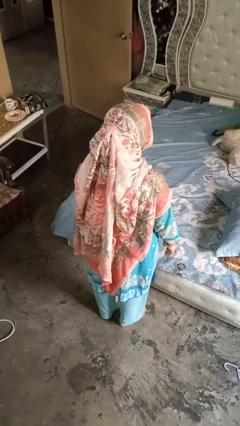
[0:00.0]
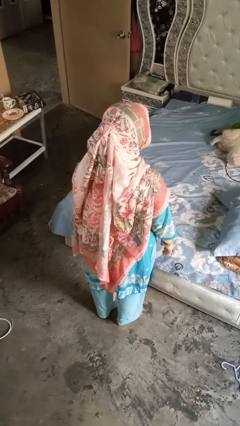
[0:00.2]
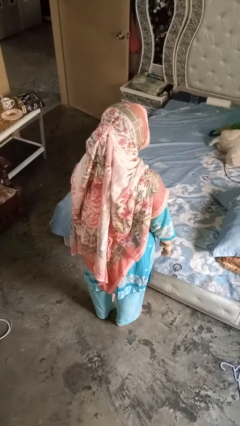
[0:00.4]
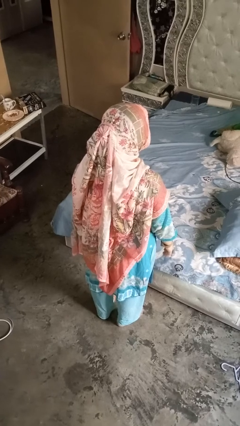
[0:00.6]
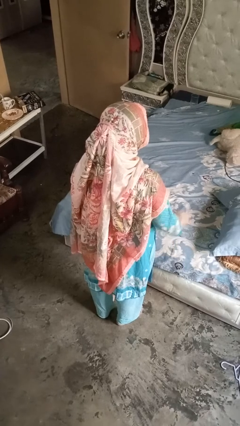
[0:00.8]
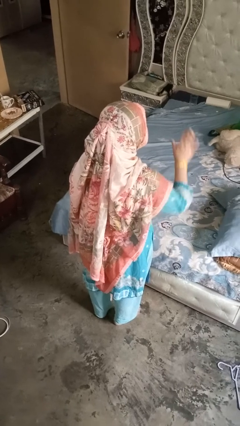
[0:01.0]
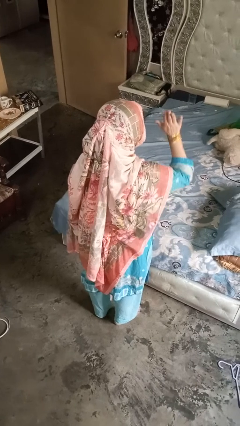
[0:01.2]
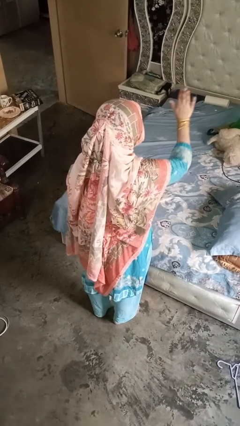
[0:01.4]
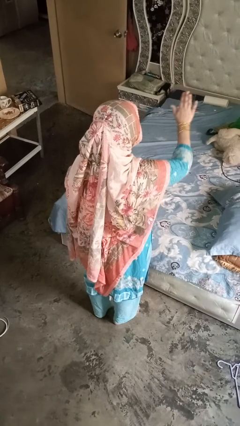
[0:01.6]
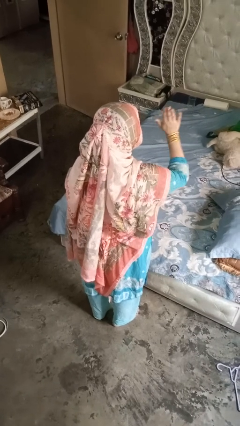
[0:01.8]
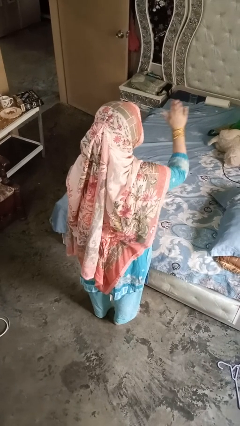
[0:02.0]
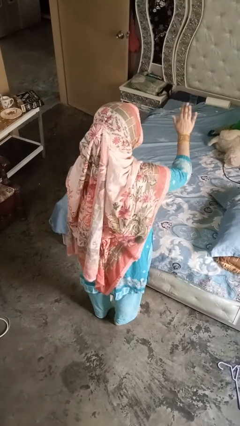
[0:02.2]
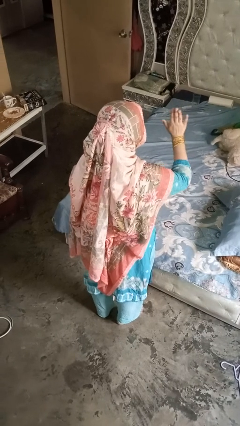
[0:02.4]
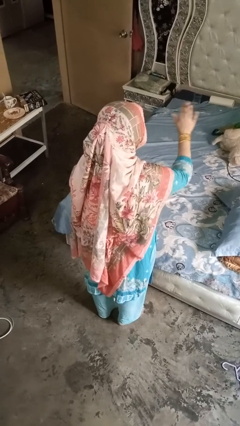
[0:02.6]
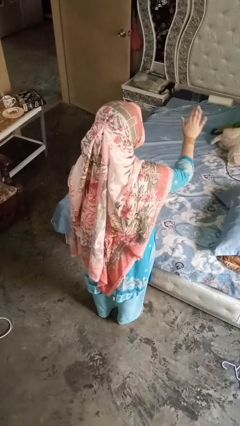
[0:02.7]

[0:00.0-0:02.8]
person gestures stop

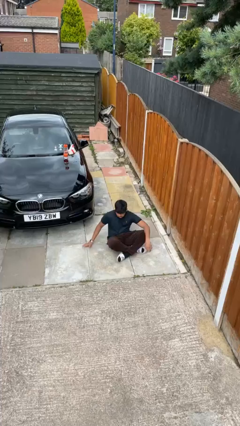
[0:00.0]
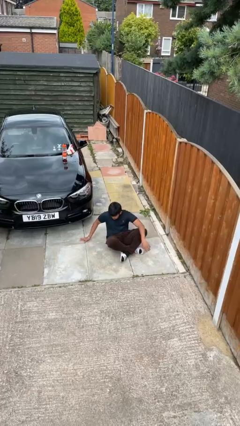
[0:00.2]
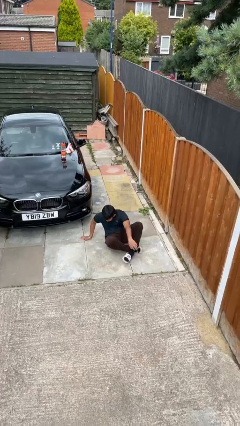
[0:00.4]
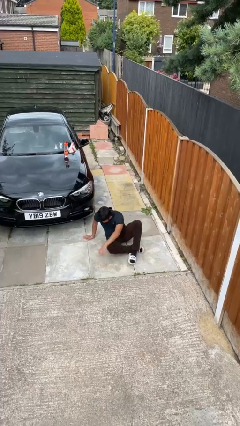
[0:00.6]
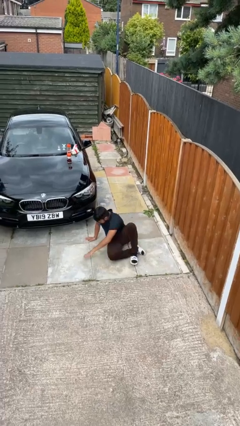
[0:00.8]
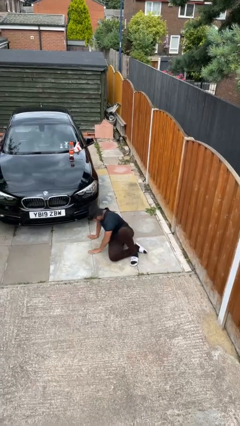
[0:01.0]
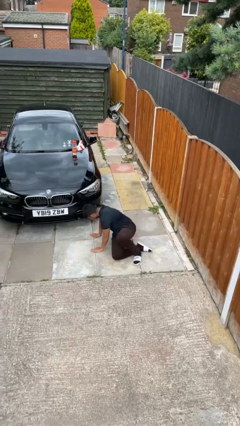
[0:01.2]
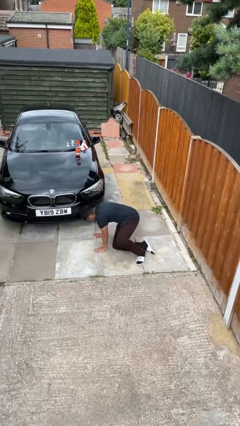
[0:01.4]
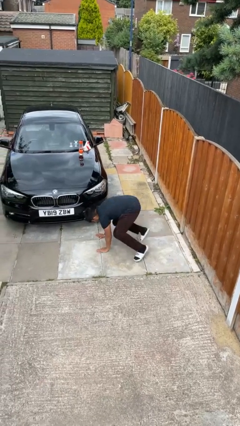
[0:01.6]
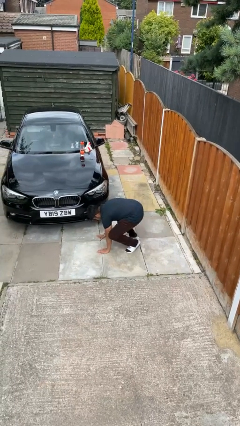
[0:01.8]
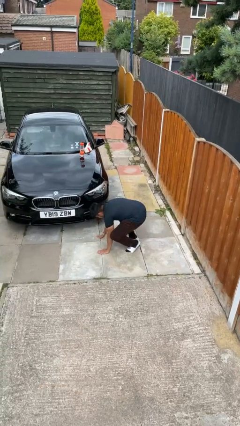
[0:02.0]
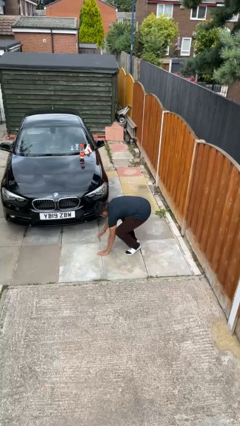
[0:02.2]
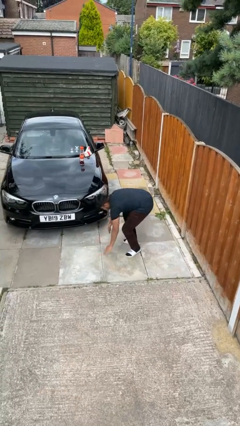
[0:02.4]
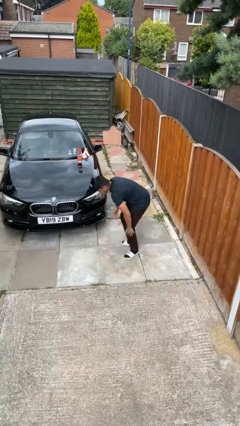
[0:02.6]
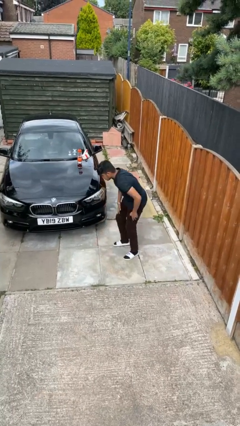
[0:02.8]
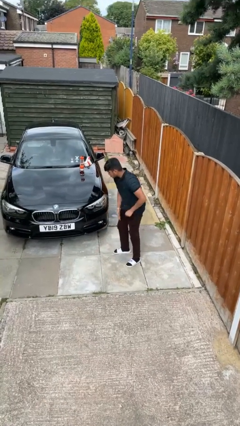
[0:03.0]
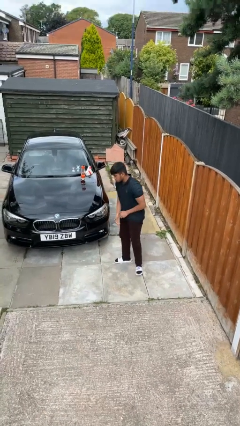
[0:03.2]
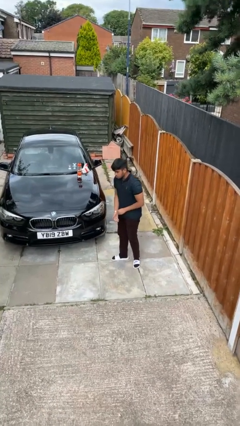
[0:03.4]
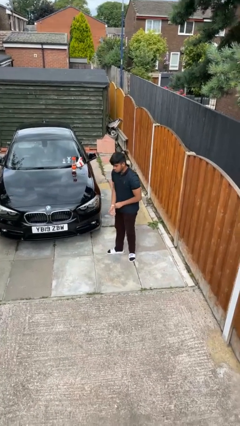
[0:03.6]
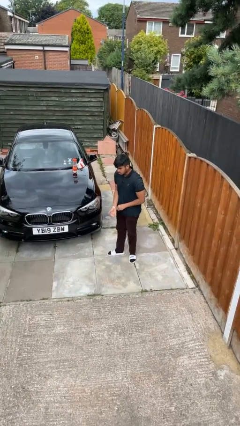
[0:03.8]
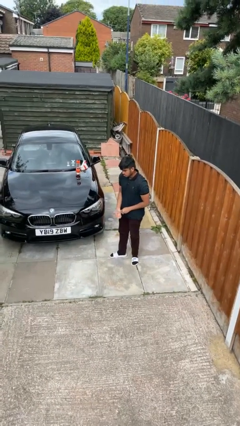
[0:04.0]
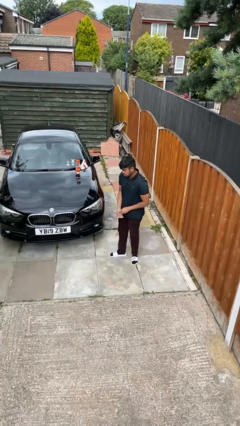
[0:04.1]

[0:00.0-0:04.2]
person stands up from floor

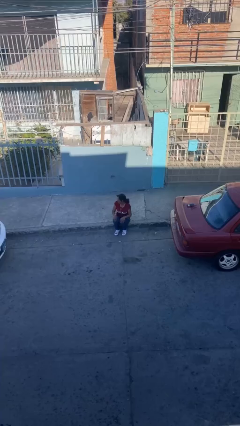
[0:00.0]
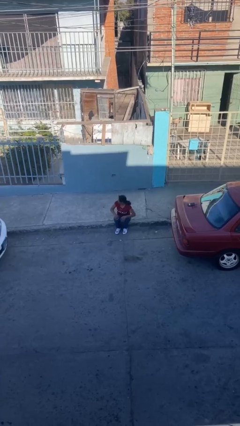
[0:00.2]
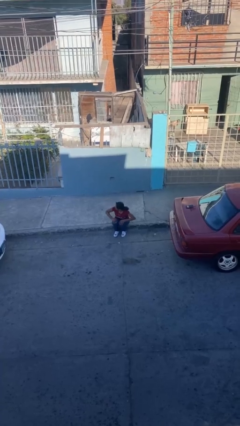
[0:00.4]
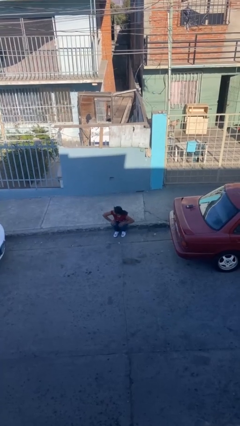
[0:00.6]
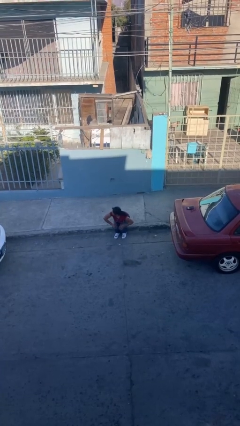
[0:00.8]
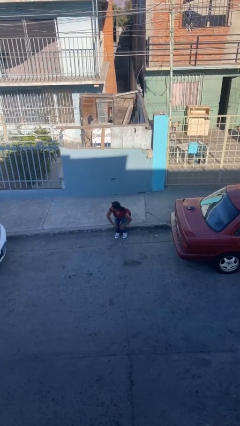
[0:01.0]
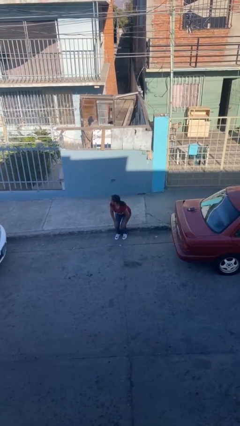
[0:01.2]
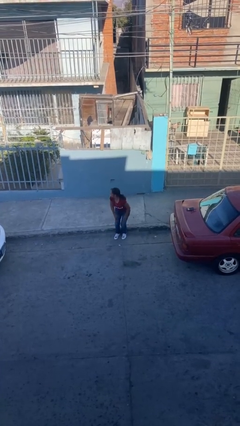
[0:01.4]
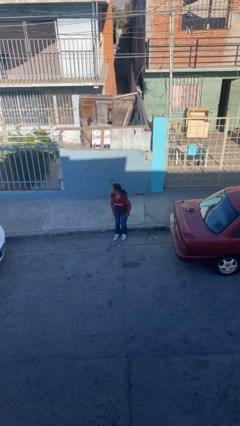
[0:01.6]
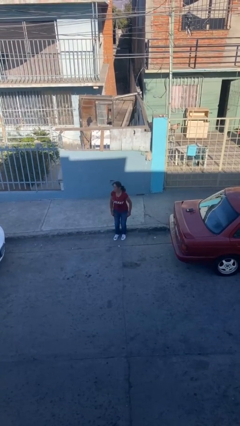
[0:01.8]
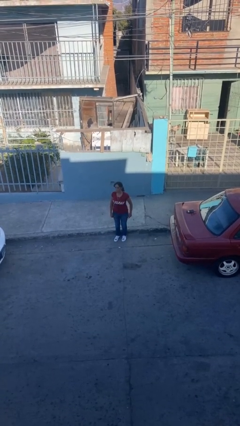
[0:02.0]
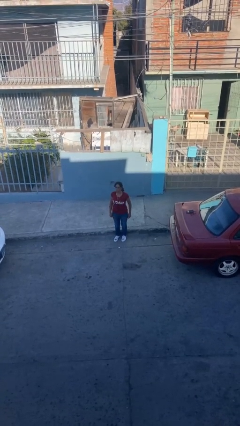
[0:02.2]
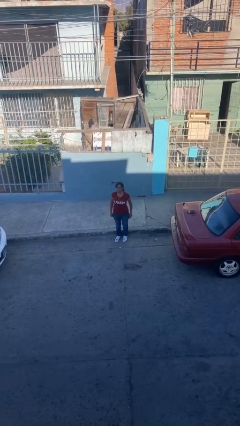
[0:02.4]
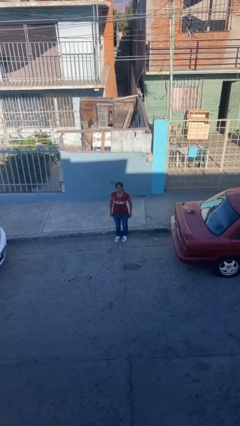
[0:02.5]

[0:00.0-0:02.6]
person stands up

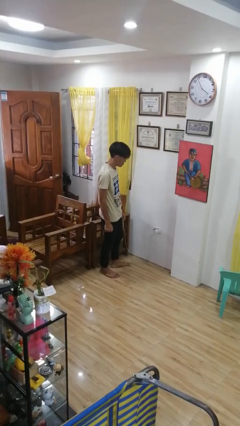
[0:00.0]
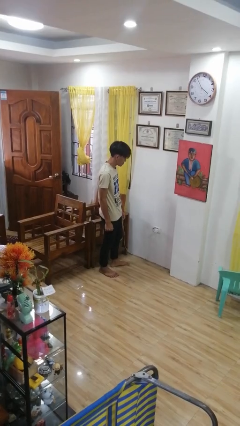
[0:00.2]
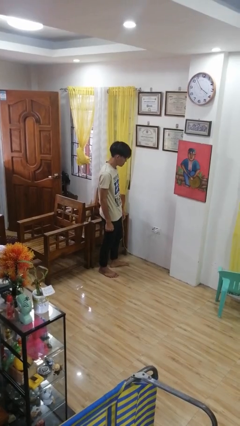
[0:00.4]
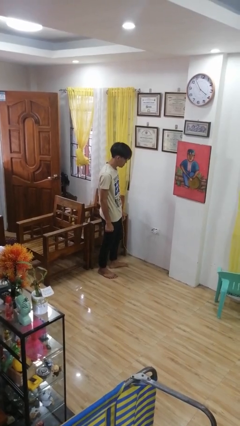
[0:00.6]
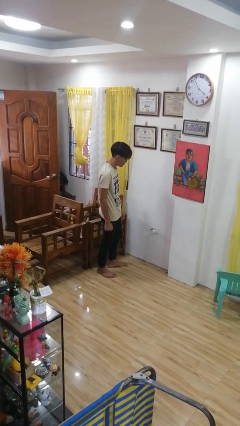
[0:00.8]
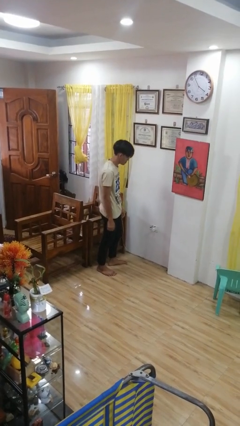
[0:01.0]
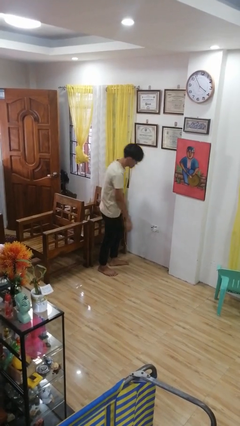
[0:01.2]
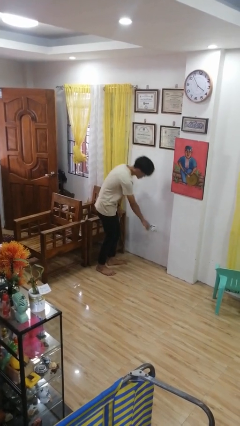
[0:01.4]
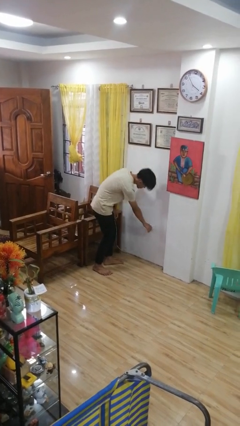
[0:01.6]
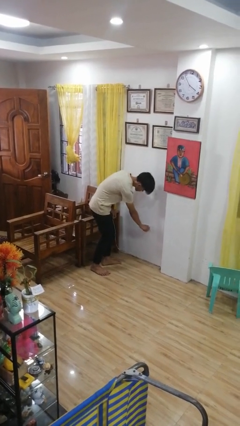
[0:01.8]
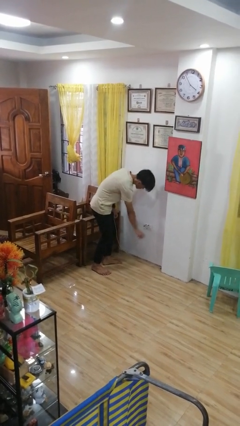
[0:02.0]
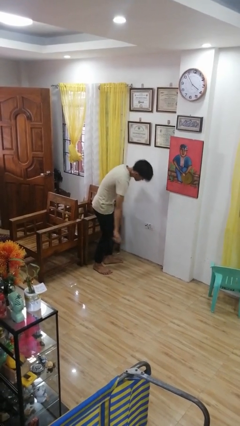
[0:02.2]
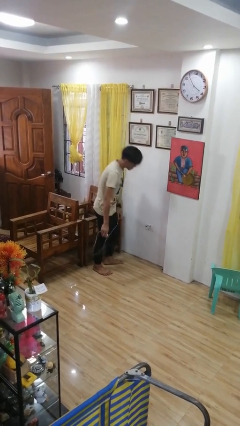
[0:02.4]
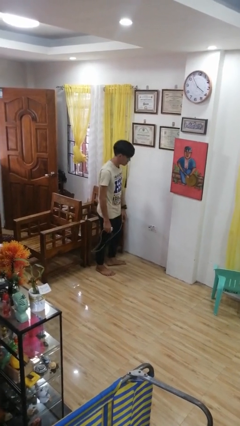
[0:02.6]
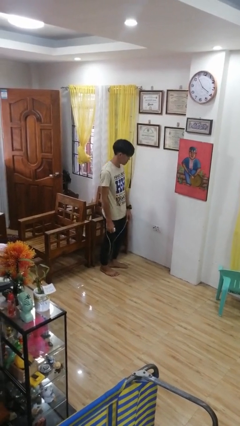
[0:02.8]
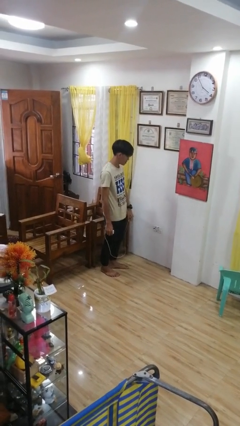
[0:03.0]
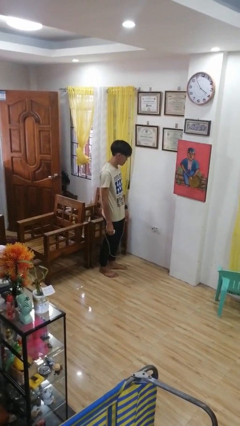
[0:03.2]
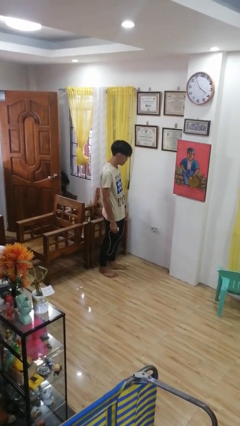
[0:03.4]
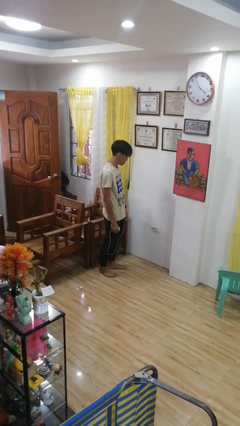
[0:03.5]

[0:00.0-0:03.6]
person unplugs from electrical socket

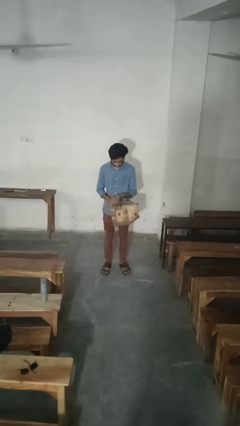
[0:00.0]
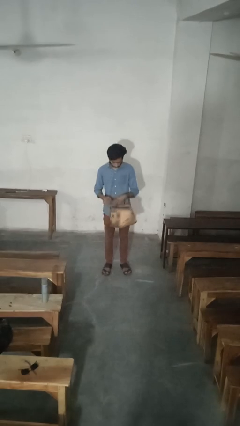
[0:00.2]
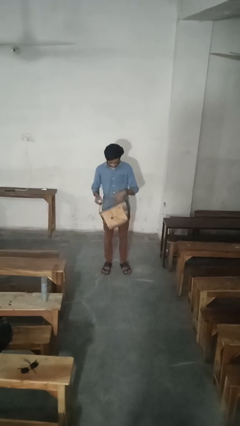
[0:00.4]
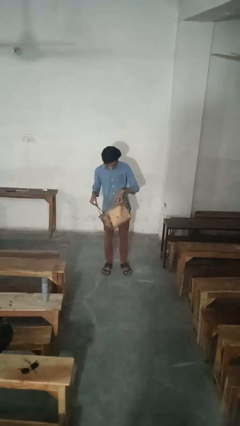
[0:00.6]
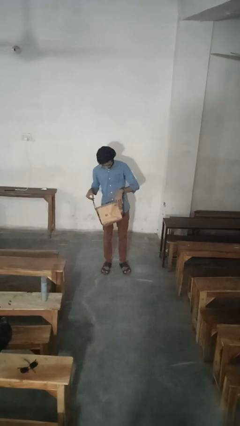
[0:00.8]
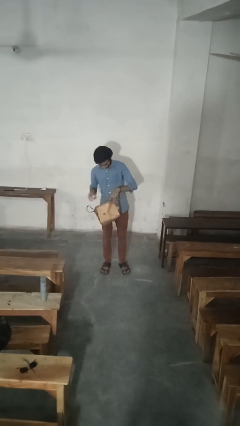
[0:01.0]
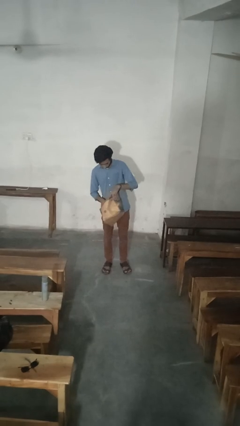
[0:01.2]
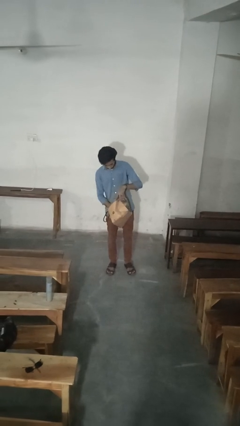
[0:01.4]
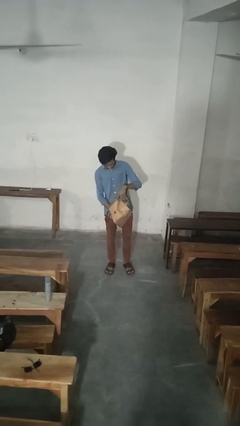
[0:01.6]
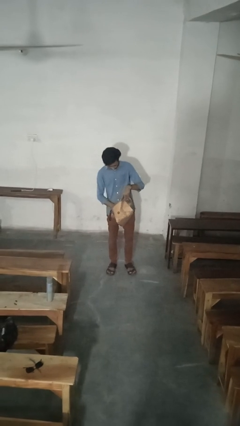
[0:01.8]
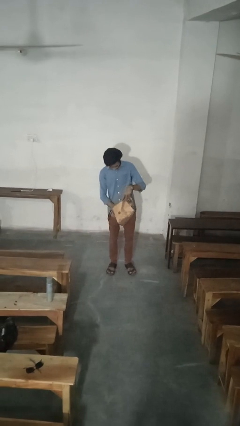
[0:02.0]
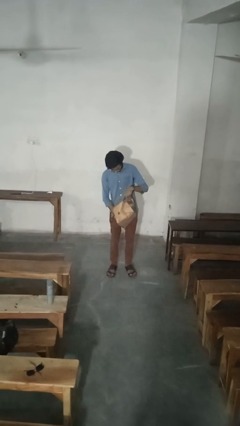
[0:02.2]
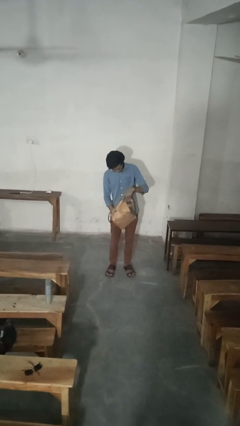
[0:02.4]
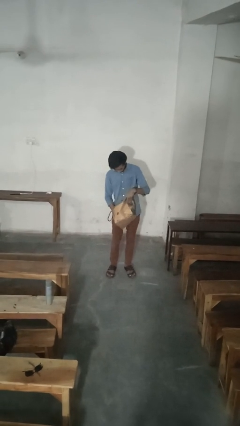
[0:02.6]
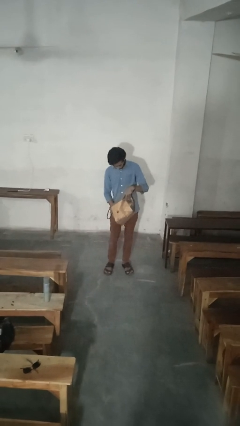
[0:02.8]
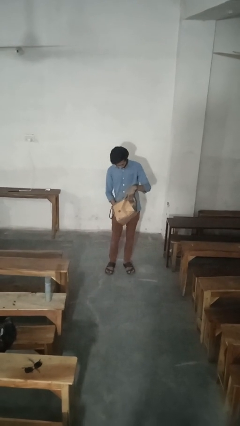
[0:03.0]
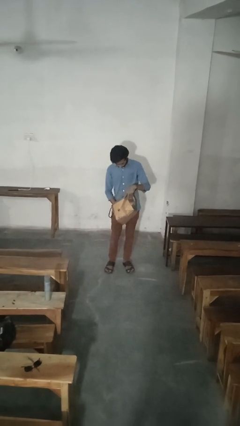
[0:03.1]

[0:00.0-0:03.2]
person searches in purse

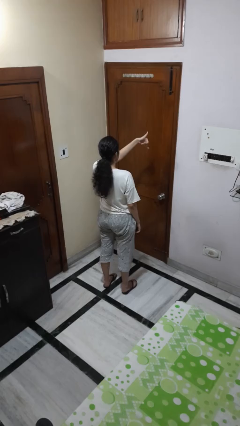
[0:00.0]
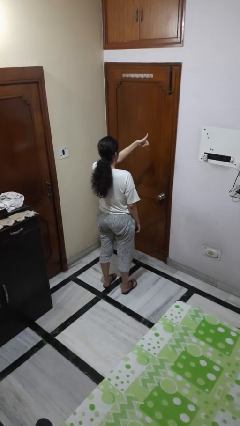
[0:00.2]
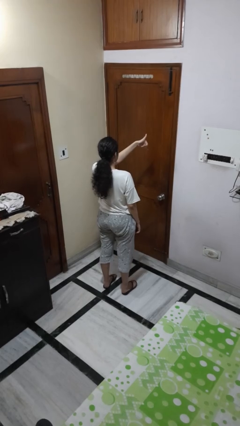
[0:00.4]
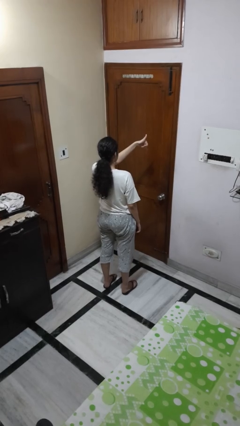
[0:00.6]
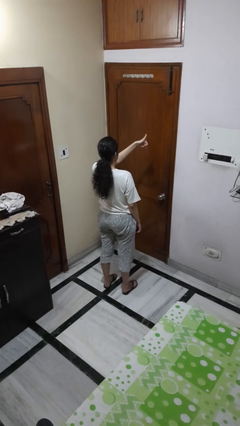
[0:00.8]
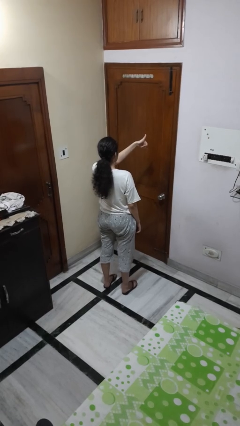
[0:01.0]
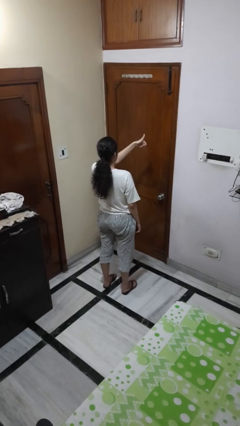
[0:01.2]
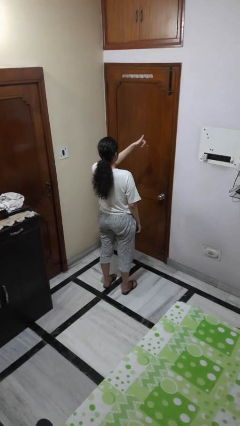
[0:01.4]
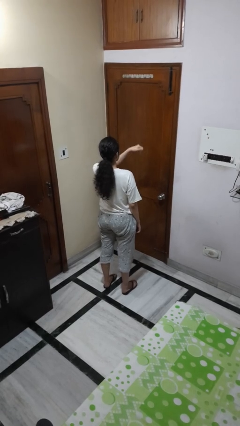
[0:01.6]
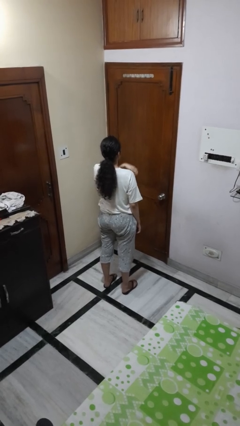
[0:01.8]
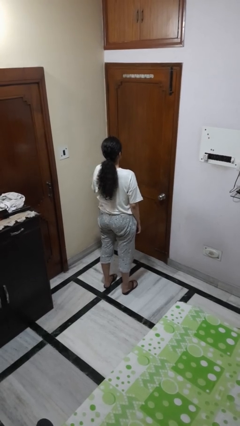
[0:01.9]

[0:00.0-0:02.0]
person gestures hang loose
